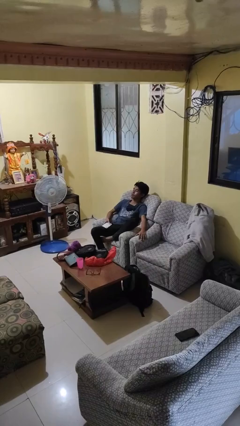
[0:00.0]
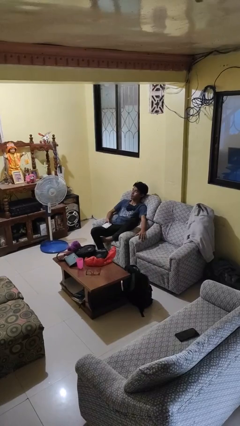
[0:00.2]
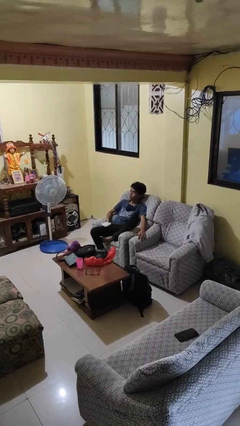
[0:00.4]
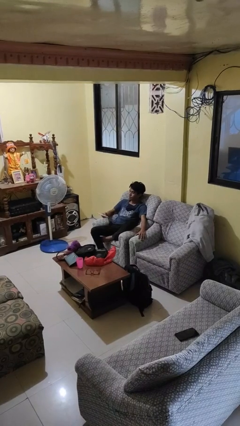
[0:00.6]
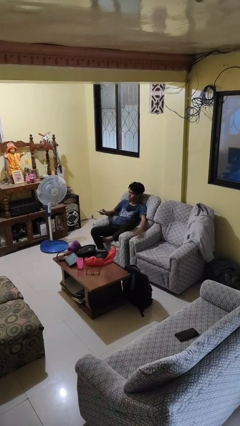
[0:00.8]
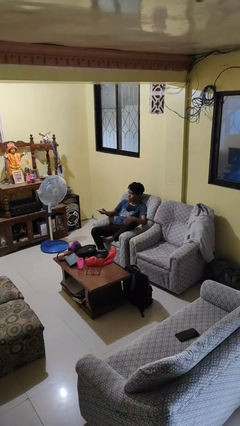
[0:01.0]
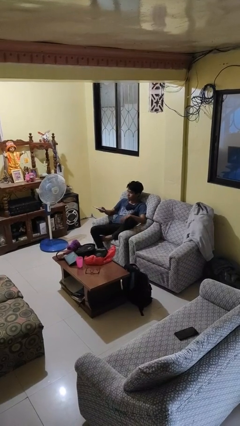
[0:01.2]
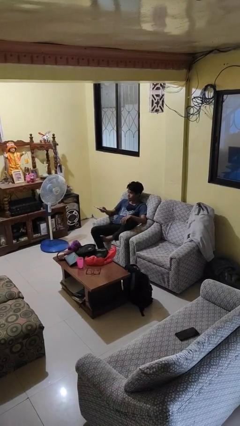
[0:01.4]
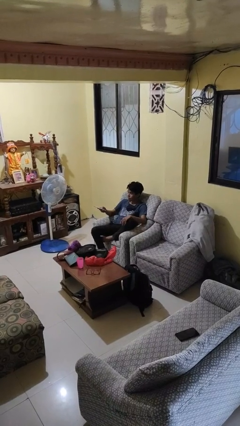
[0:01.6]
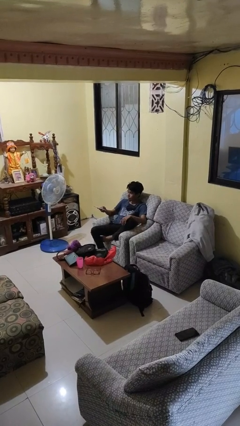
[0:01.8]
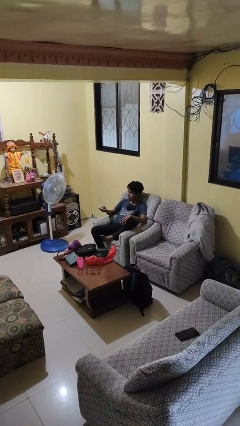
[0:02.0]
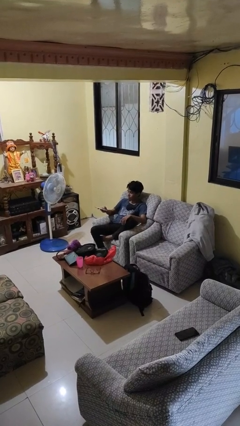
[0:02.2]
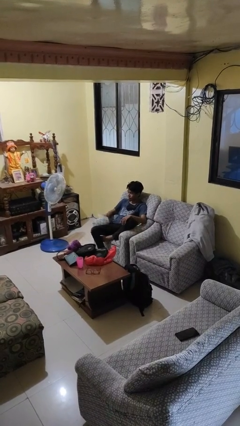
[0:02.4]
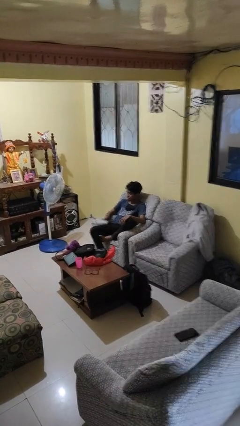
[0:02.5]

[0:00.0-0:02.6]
person uses television remote

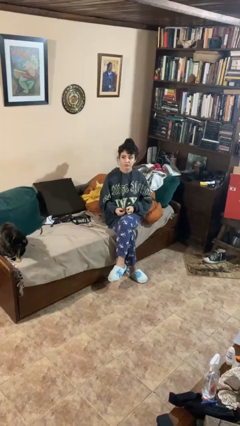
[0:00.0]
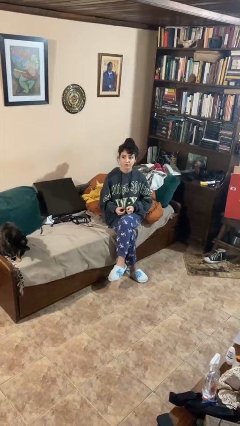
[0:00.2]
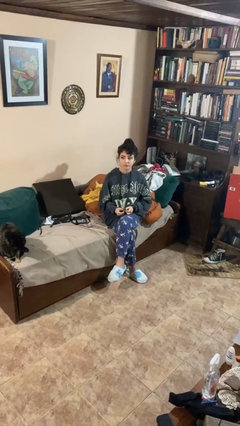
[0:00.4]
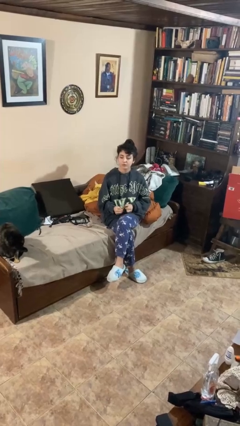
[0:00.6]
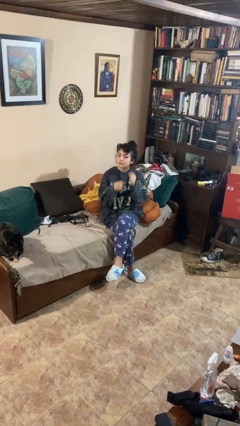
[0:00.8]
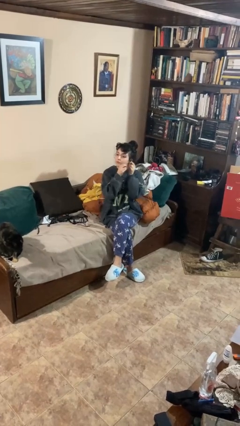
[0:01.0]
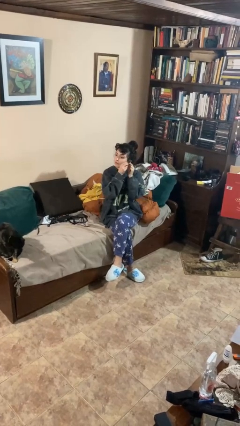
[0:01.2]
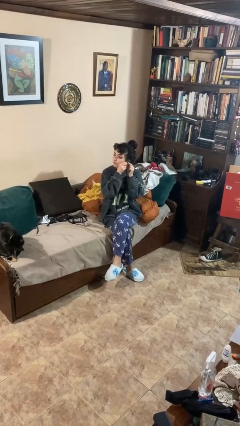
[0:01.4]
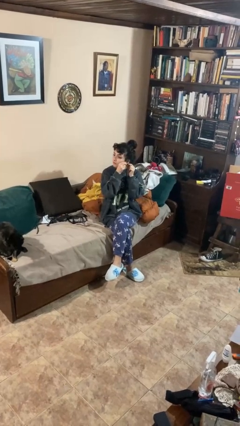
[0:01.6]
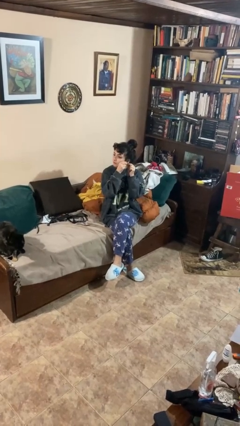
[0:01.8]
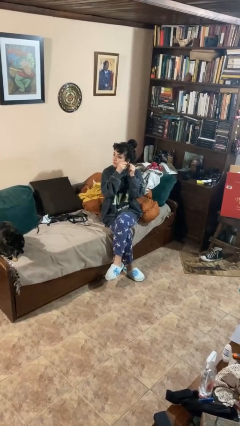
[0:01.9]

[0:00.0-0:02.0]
person puts on earrings

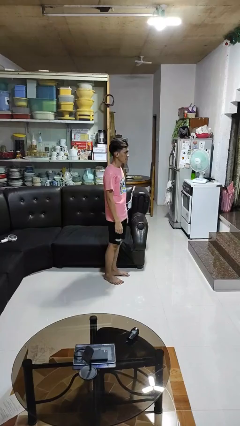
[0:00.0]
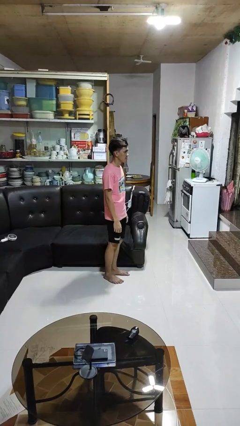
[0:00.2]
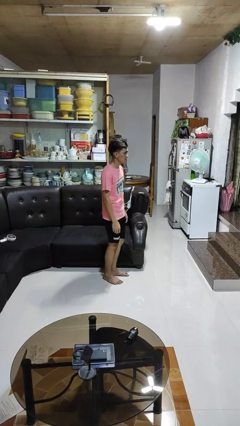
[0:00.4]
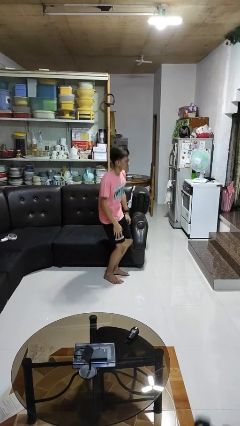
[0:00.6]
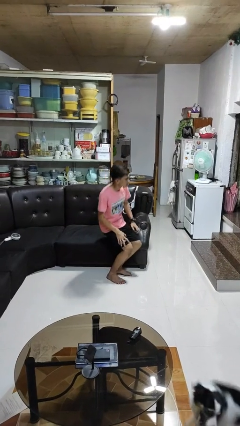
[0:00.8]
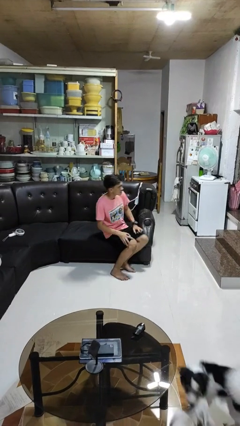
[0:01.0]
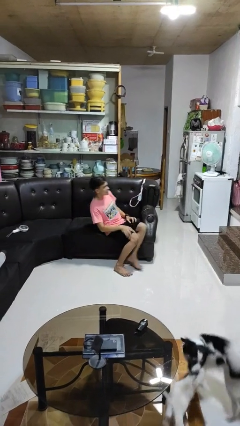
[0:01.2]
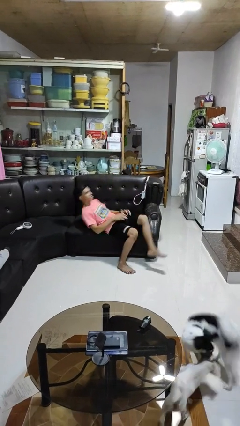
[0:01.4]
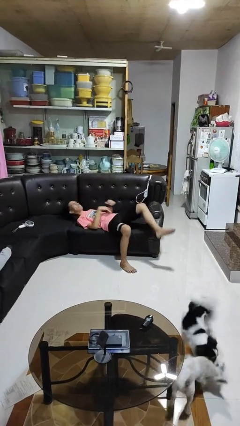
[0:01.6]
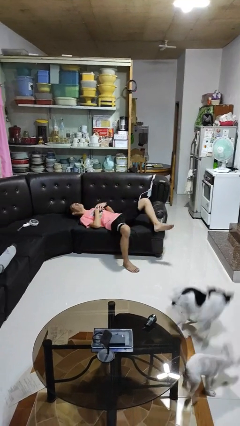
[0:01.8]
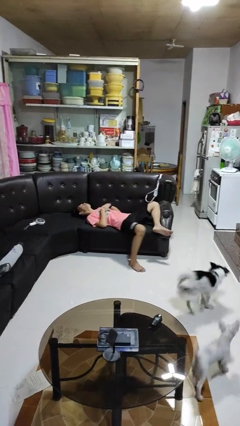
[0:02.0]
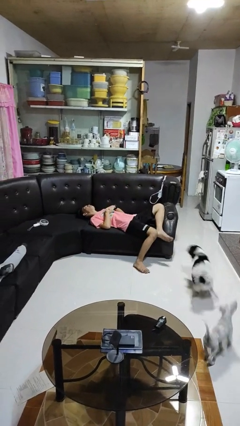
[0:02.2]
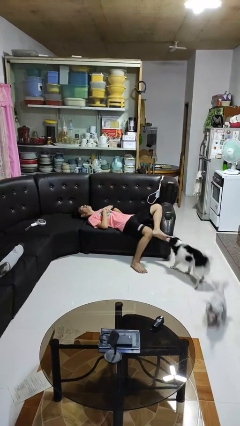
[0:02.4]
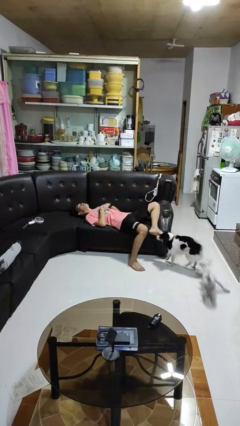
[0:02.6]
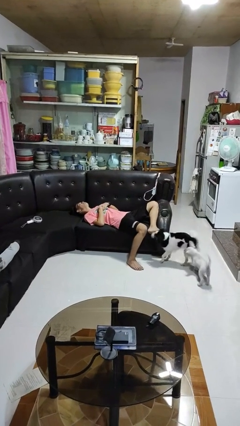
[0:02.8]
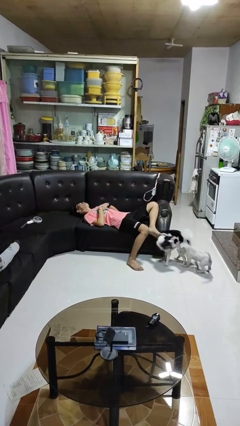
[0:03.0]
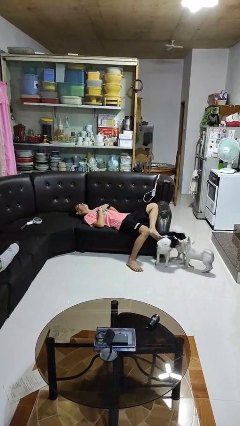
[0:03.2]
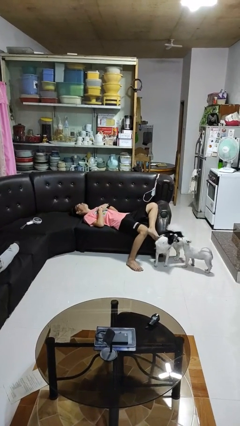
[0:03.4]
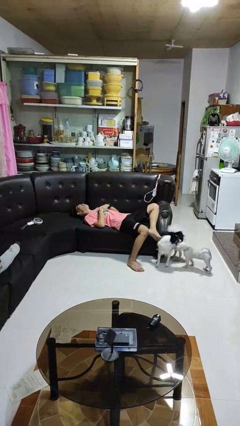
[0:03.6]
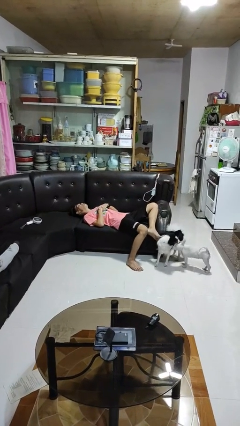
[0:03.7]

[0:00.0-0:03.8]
person lies down on couch

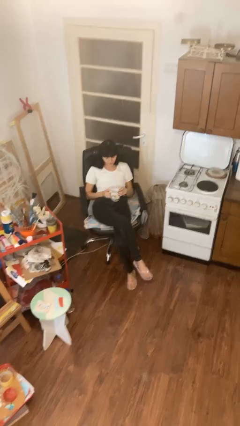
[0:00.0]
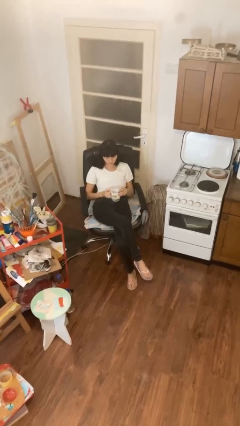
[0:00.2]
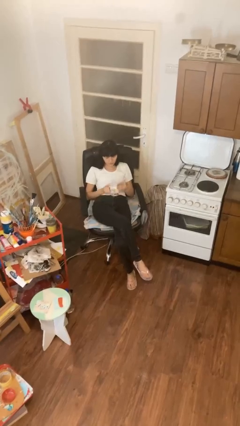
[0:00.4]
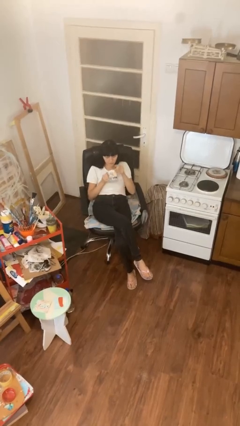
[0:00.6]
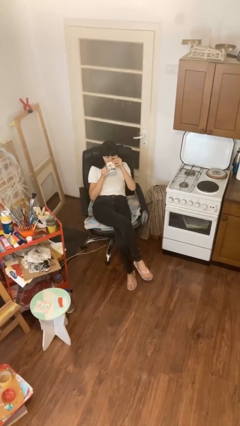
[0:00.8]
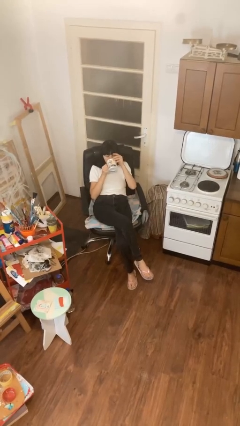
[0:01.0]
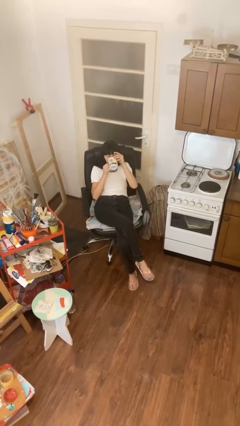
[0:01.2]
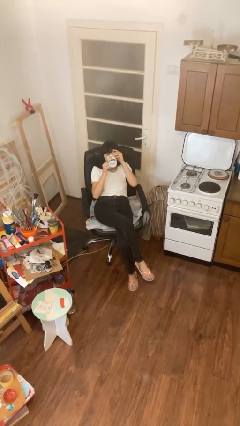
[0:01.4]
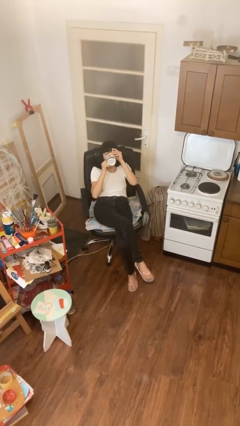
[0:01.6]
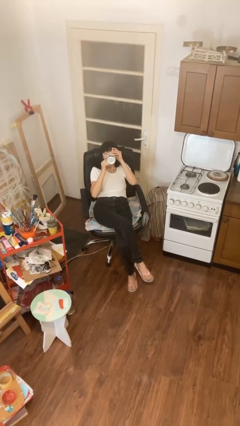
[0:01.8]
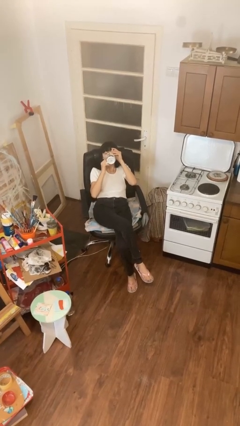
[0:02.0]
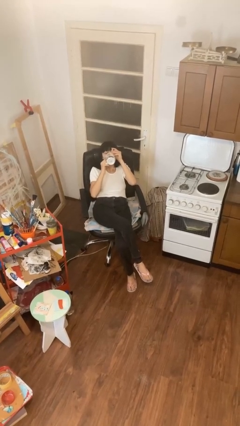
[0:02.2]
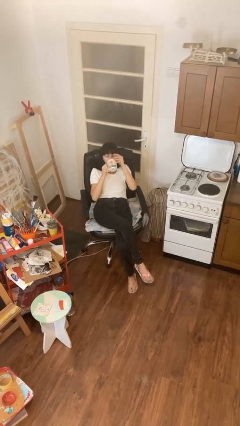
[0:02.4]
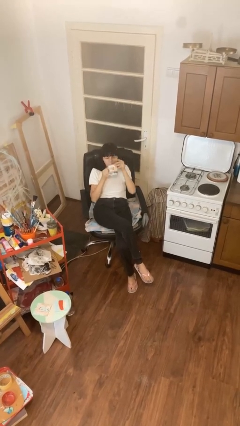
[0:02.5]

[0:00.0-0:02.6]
person drinks from mug

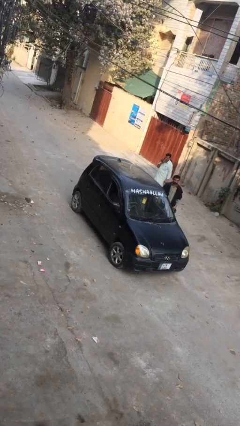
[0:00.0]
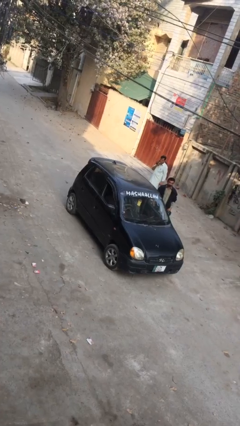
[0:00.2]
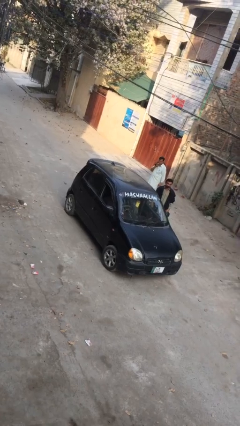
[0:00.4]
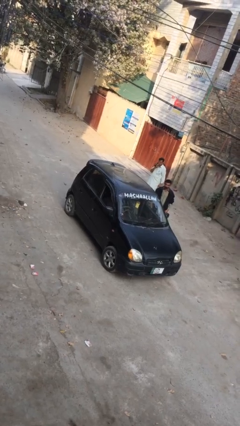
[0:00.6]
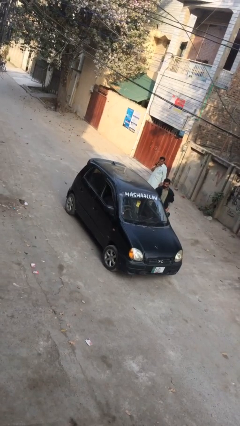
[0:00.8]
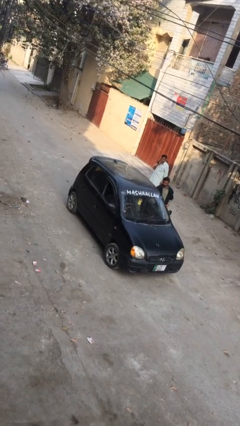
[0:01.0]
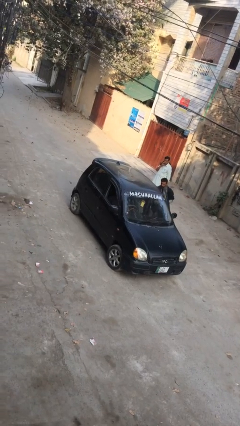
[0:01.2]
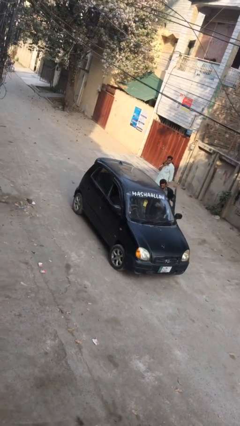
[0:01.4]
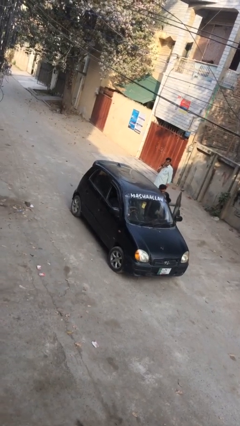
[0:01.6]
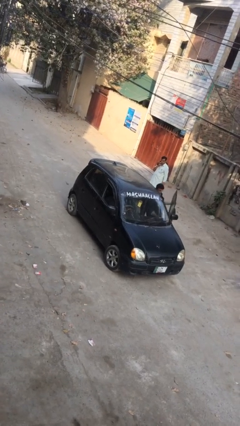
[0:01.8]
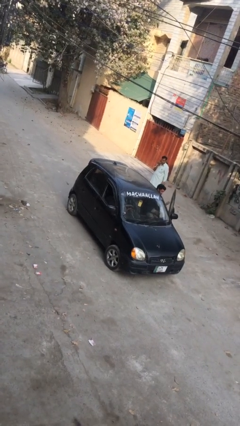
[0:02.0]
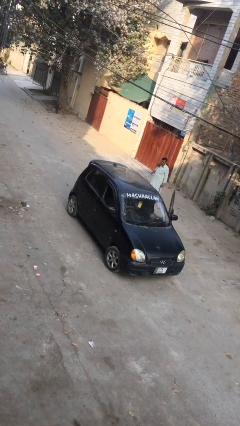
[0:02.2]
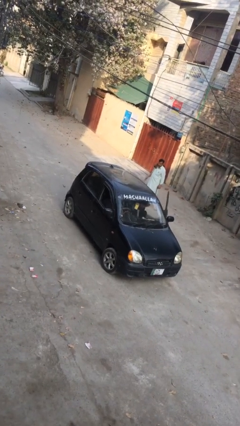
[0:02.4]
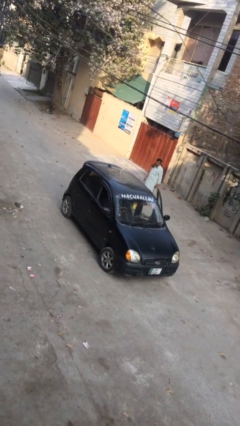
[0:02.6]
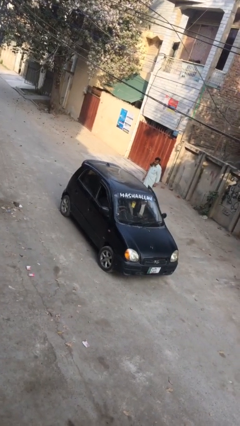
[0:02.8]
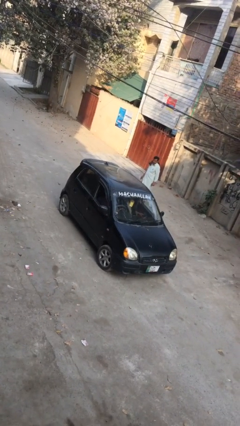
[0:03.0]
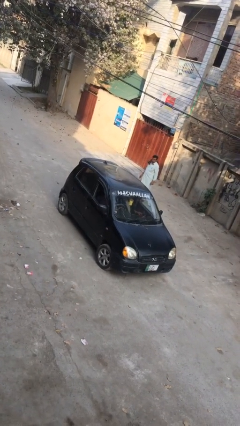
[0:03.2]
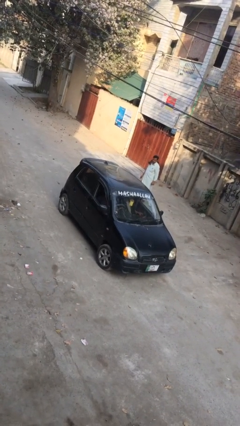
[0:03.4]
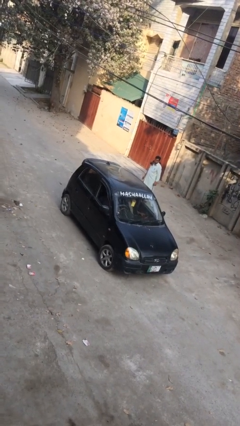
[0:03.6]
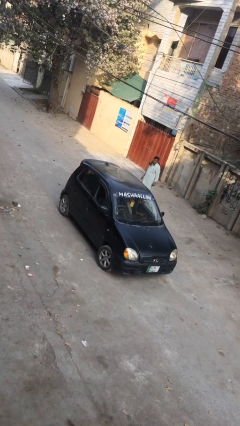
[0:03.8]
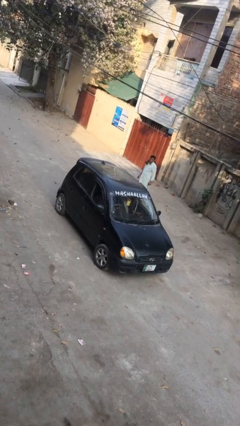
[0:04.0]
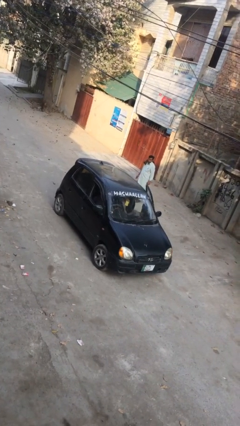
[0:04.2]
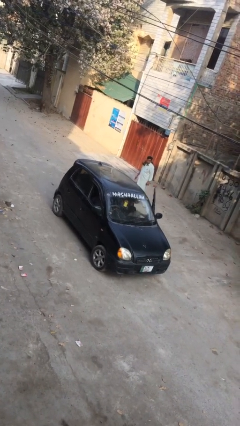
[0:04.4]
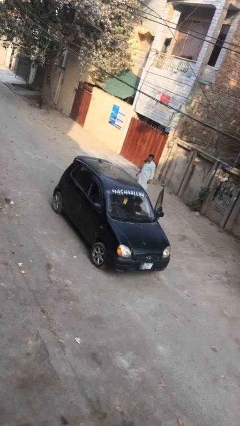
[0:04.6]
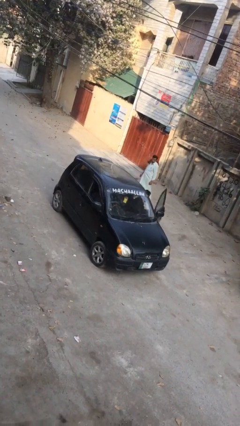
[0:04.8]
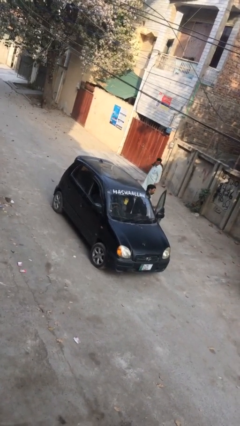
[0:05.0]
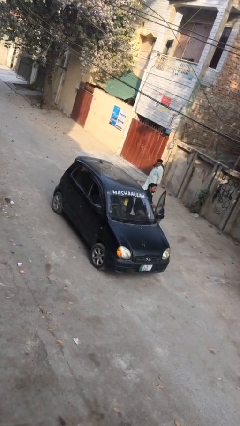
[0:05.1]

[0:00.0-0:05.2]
car picks up person

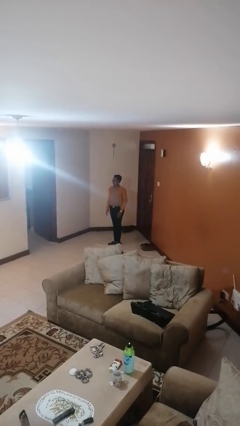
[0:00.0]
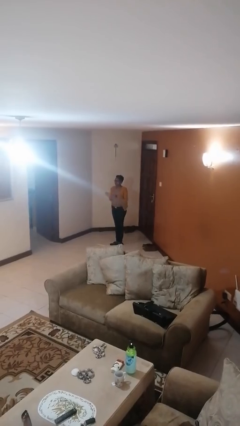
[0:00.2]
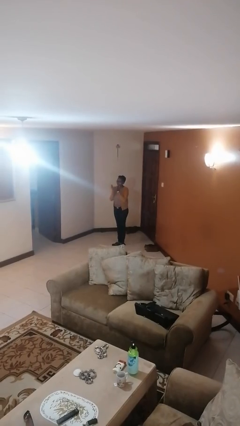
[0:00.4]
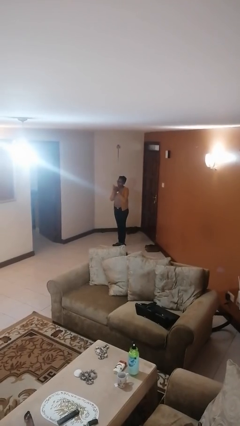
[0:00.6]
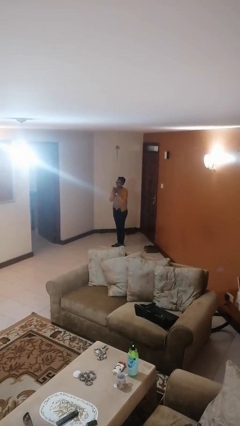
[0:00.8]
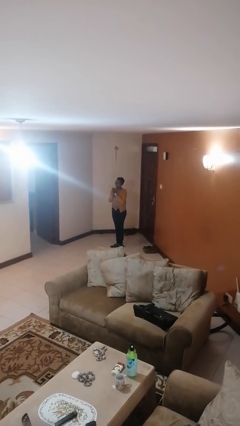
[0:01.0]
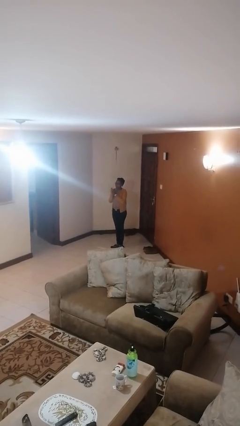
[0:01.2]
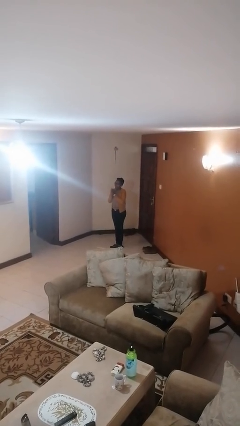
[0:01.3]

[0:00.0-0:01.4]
person claps hands
